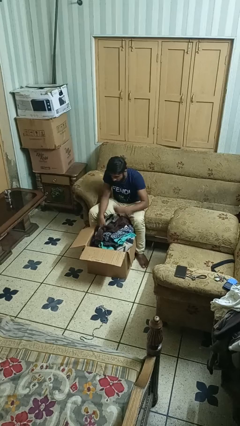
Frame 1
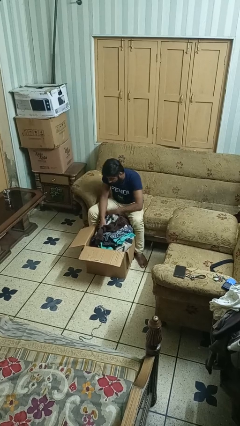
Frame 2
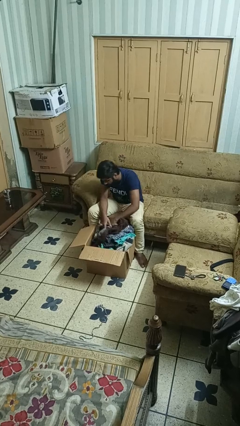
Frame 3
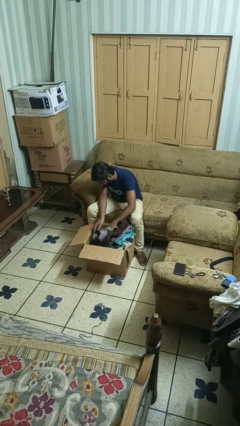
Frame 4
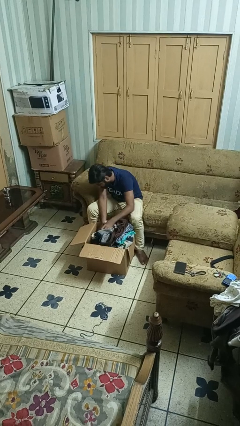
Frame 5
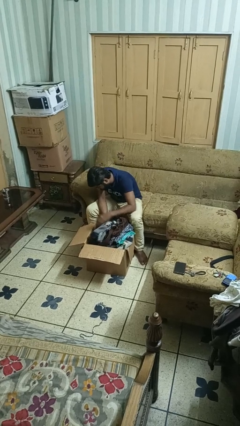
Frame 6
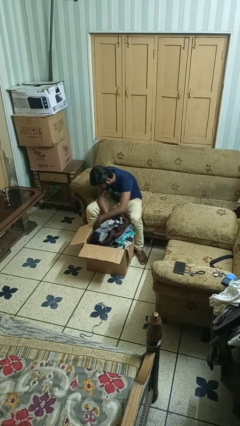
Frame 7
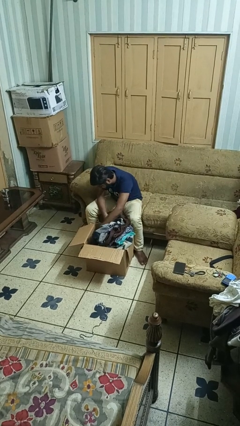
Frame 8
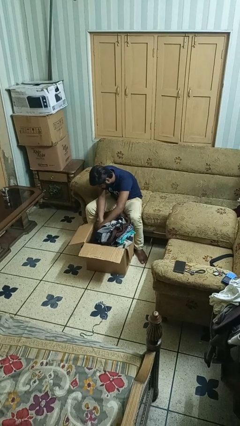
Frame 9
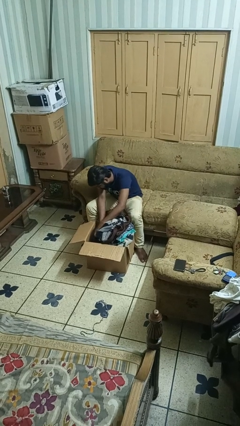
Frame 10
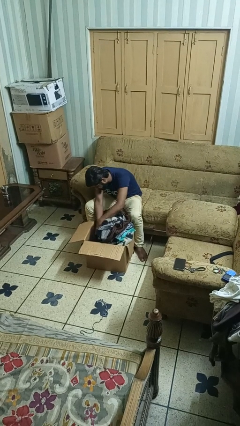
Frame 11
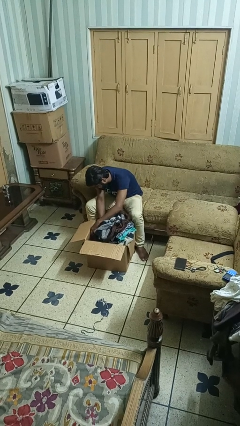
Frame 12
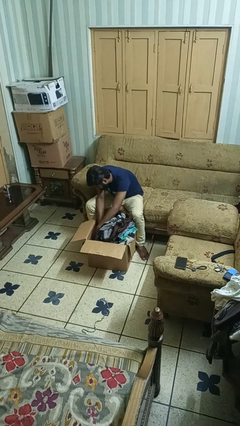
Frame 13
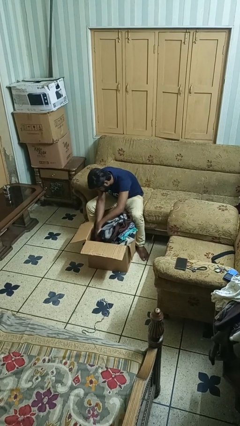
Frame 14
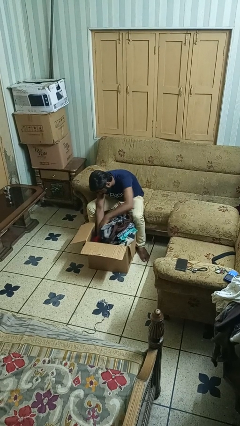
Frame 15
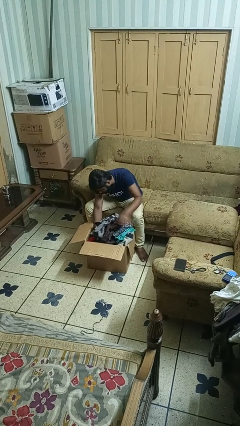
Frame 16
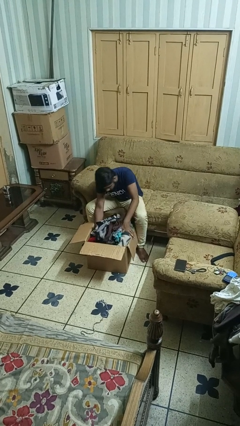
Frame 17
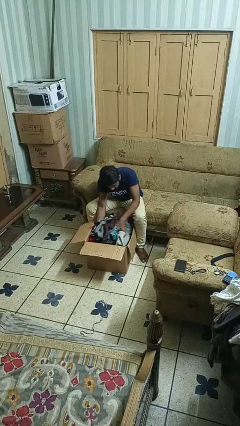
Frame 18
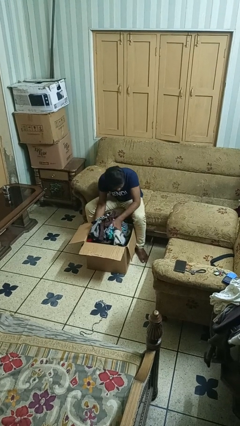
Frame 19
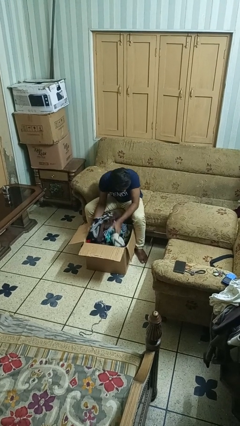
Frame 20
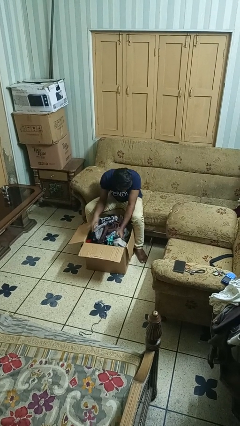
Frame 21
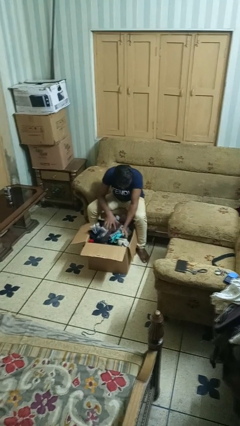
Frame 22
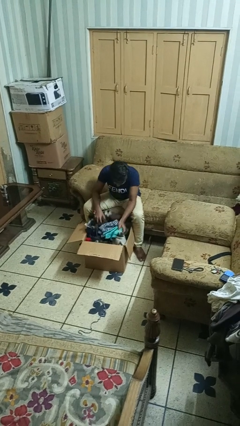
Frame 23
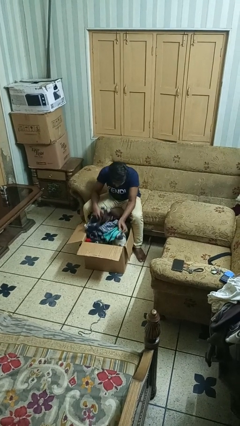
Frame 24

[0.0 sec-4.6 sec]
person searches in box

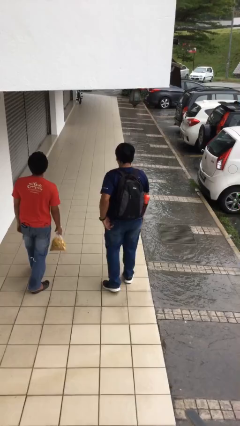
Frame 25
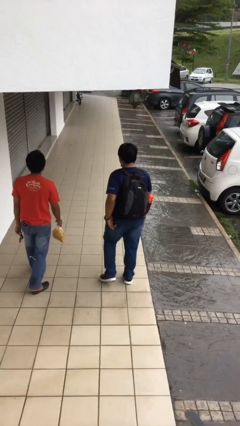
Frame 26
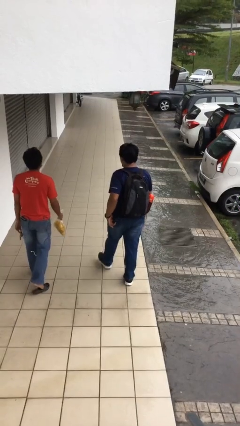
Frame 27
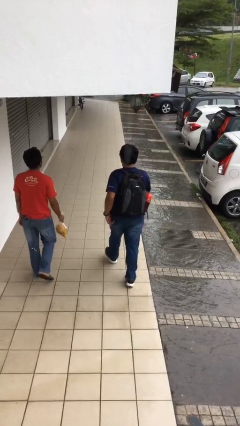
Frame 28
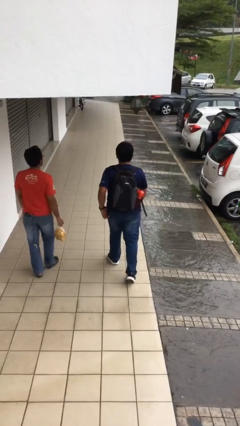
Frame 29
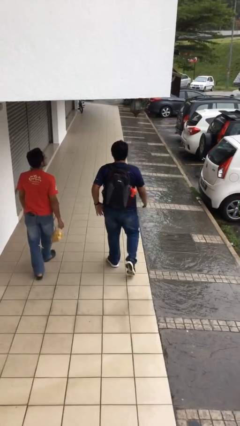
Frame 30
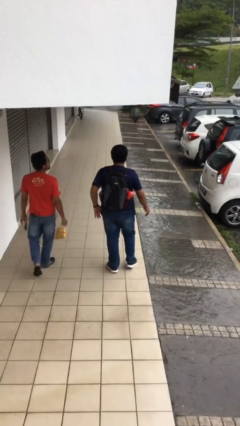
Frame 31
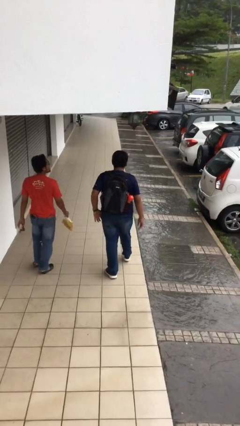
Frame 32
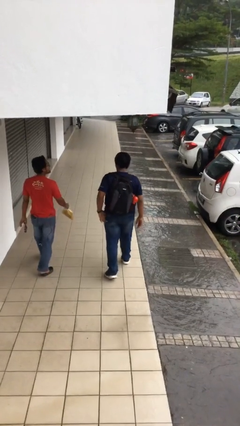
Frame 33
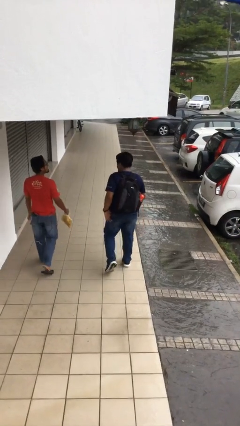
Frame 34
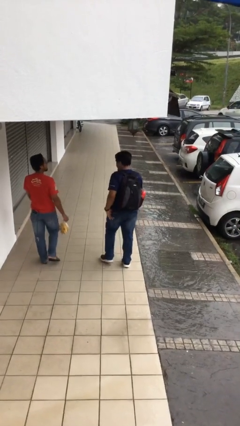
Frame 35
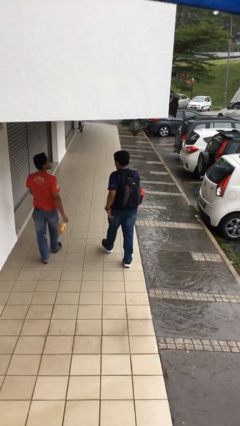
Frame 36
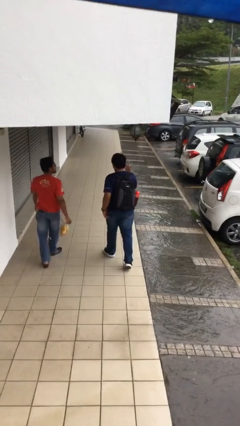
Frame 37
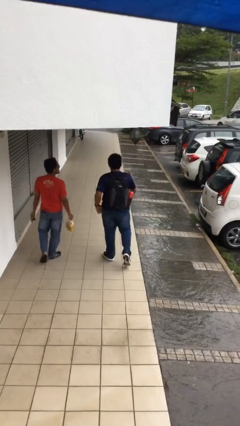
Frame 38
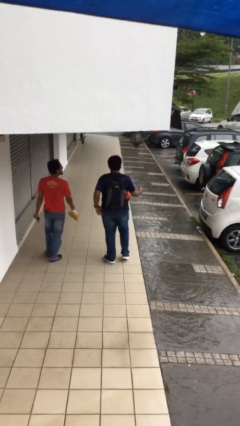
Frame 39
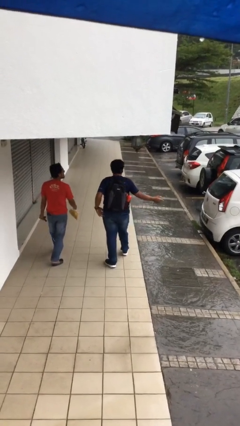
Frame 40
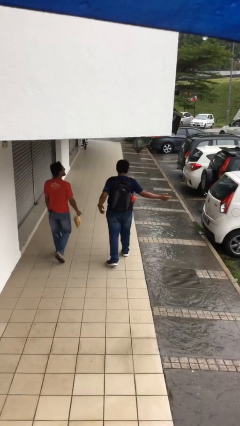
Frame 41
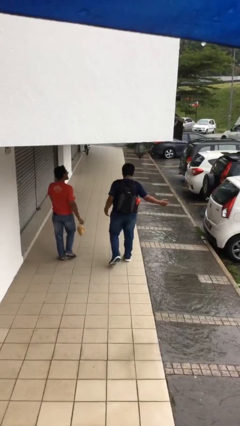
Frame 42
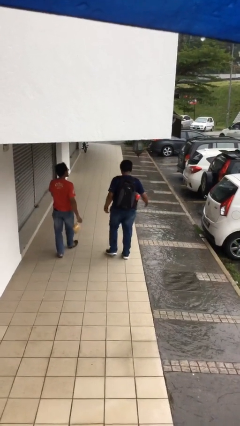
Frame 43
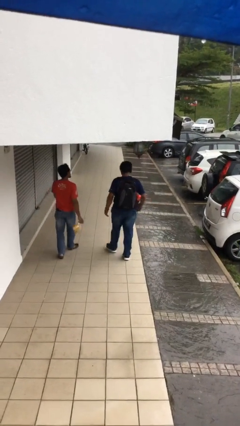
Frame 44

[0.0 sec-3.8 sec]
person talks to person

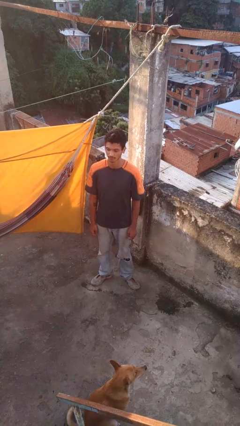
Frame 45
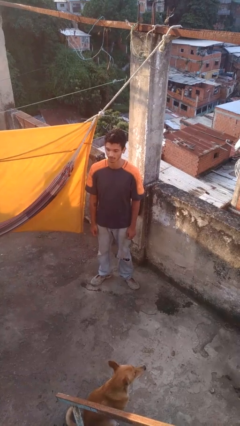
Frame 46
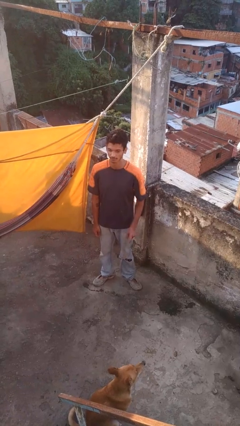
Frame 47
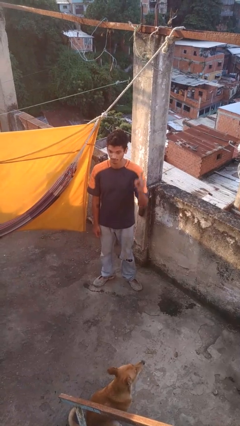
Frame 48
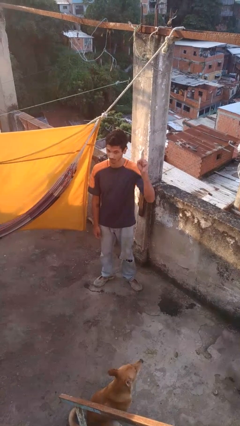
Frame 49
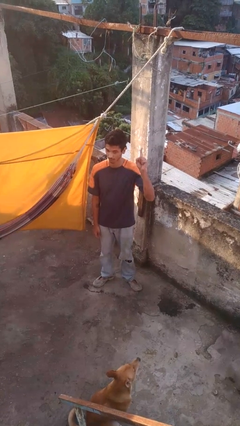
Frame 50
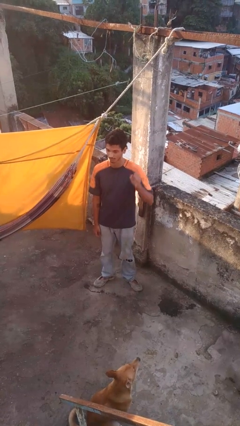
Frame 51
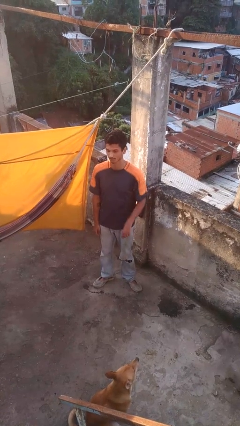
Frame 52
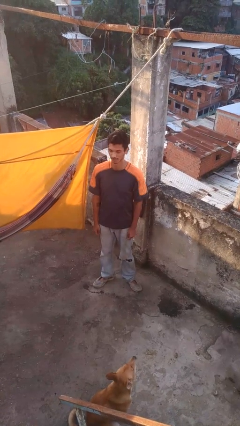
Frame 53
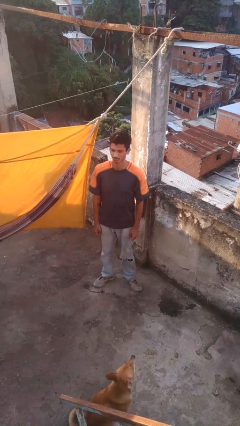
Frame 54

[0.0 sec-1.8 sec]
person gestures number one

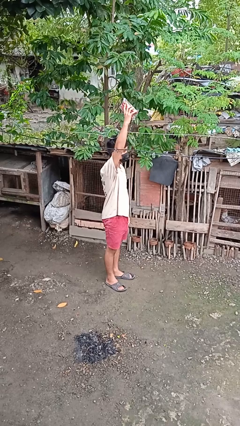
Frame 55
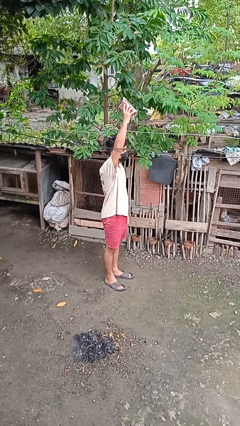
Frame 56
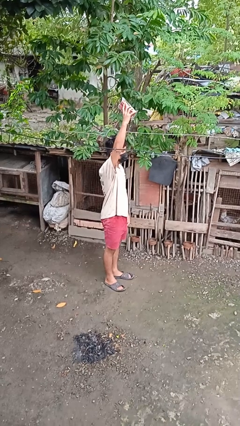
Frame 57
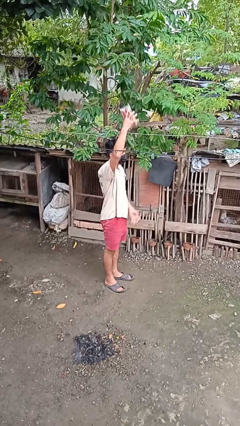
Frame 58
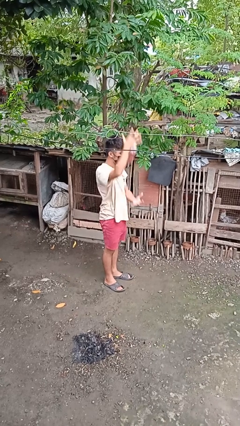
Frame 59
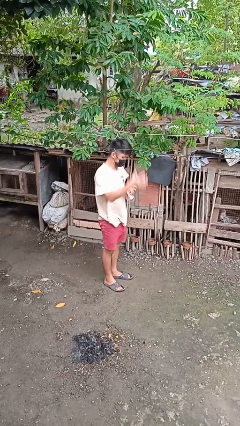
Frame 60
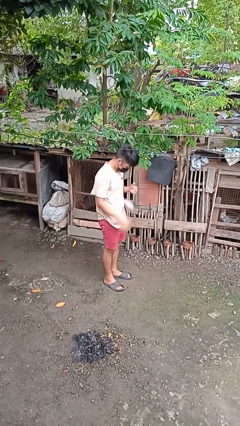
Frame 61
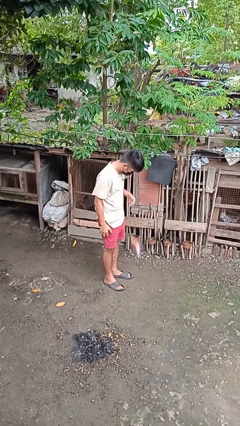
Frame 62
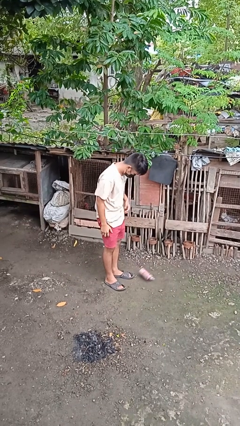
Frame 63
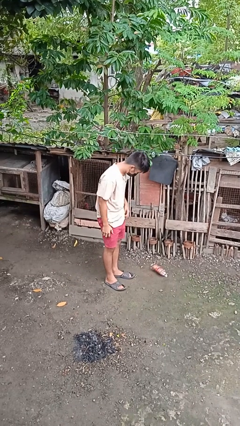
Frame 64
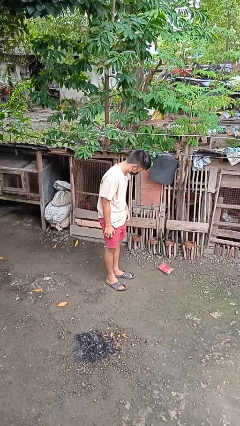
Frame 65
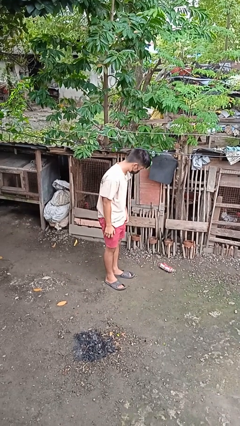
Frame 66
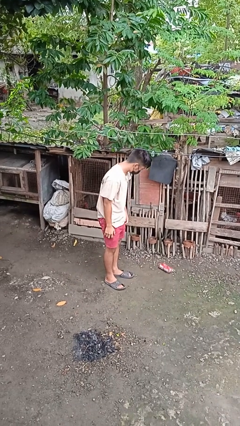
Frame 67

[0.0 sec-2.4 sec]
person drops object

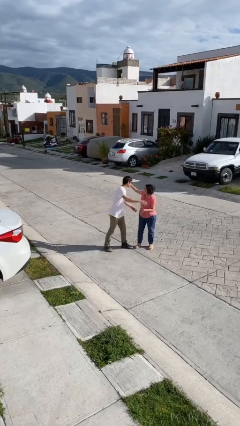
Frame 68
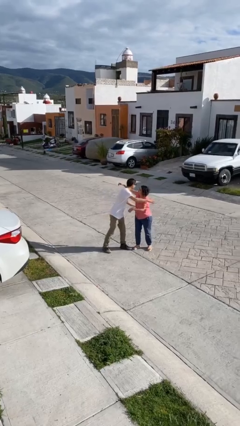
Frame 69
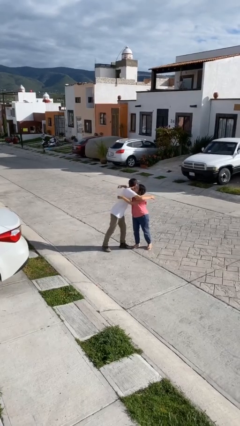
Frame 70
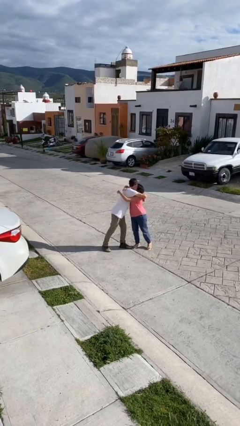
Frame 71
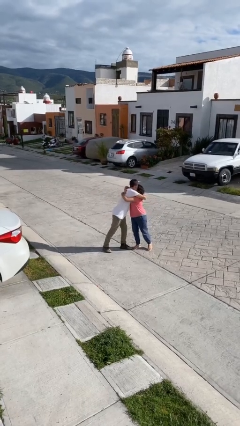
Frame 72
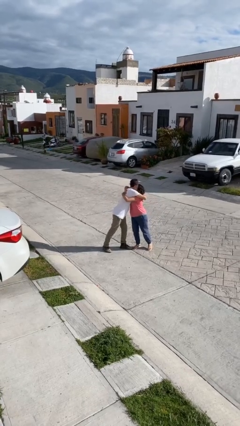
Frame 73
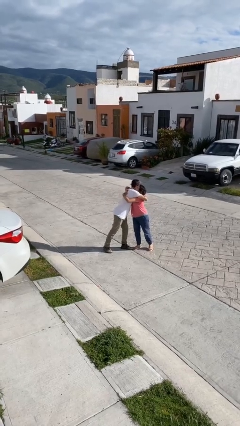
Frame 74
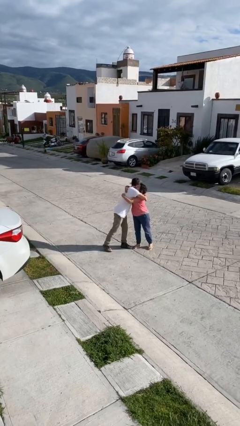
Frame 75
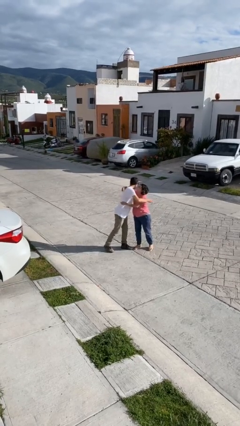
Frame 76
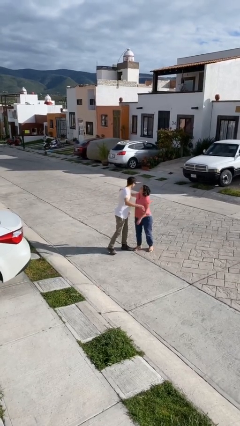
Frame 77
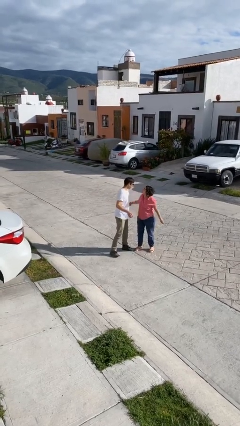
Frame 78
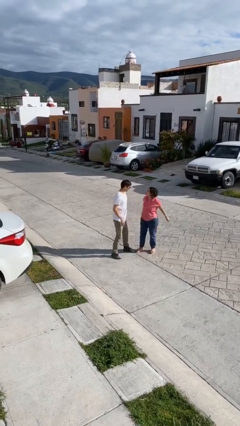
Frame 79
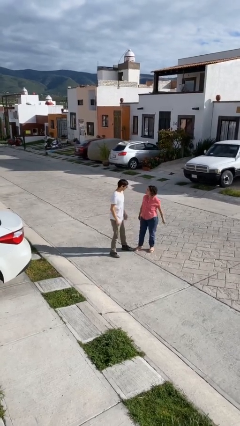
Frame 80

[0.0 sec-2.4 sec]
person embraces person

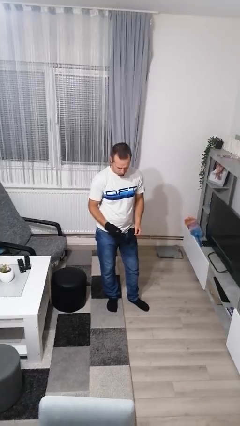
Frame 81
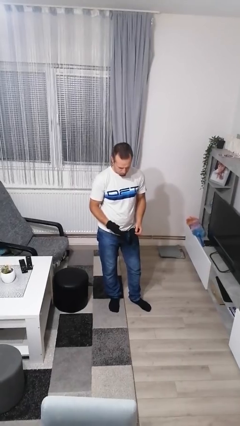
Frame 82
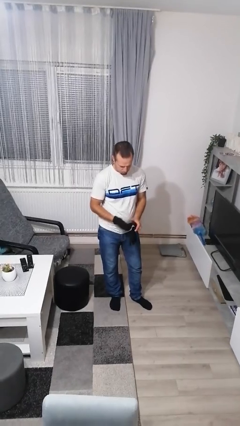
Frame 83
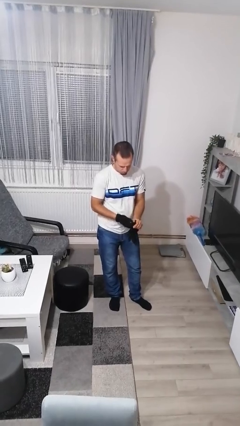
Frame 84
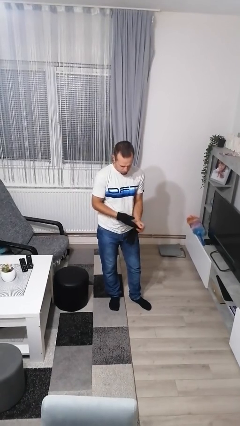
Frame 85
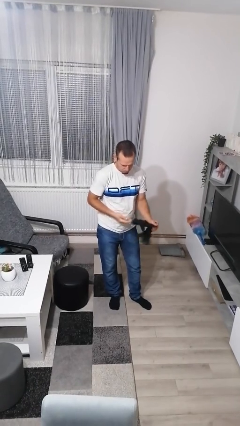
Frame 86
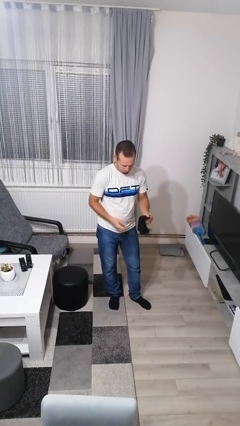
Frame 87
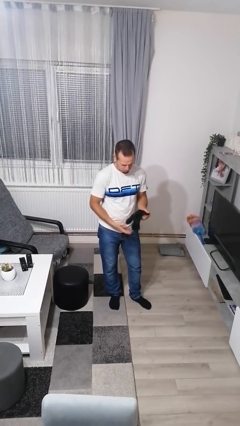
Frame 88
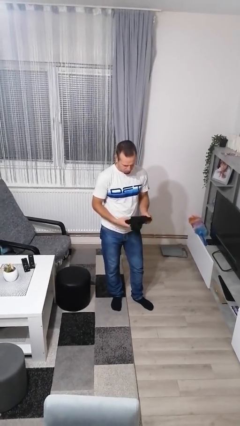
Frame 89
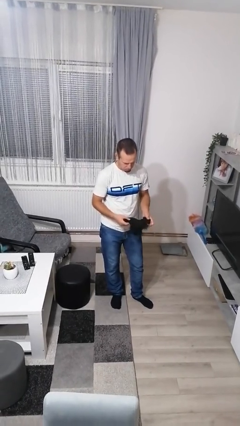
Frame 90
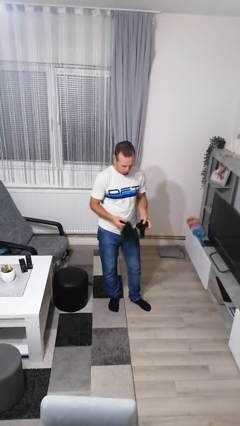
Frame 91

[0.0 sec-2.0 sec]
person takes off gloves

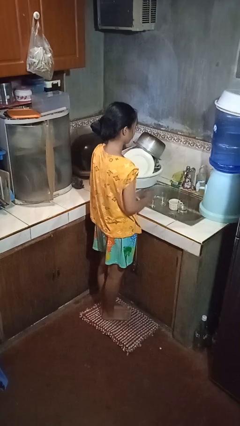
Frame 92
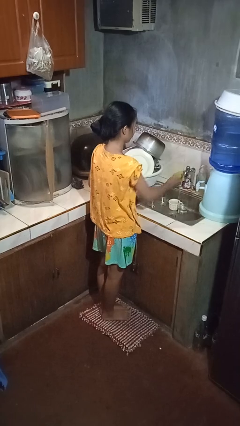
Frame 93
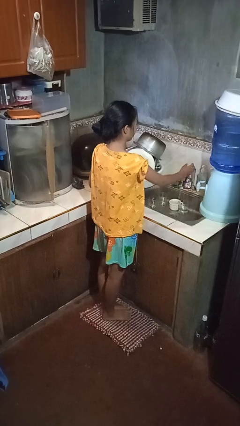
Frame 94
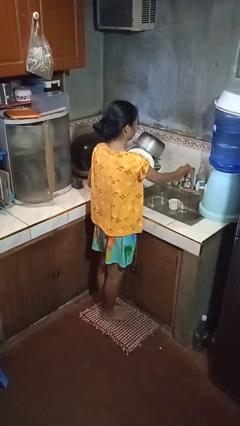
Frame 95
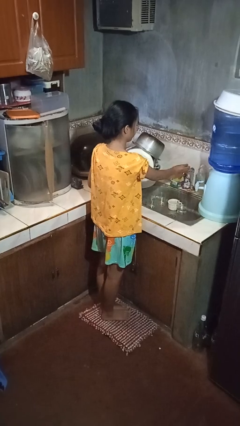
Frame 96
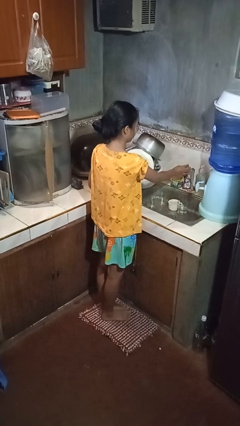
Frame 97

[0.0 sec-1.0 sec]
person turns off faucet
